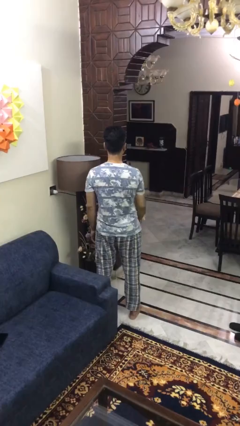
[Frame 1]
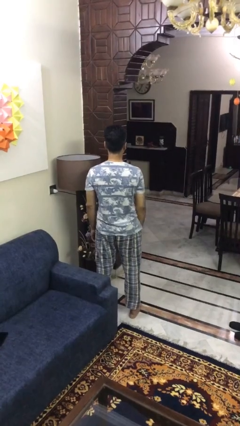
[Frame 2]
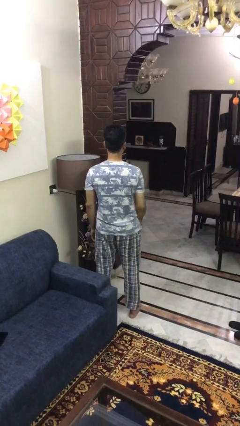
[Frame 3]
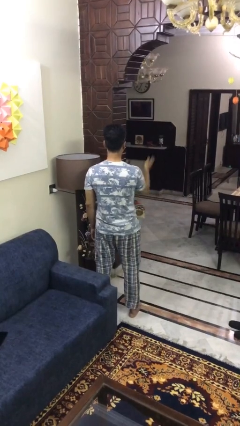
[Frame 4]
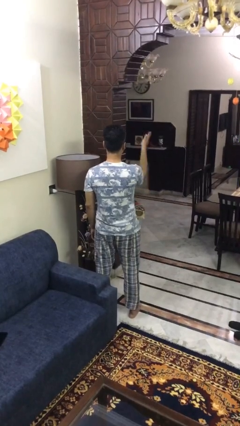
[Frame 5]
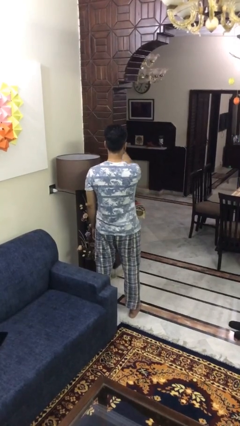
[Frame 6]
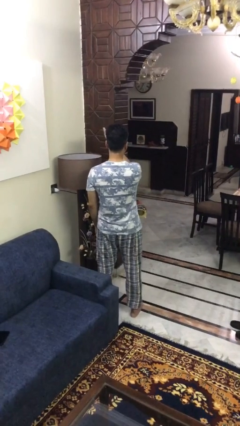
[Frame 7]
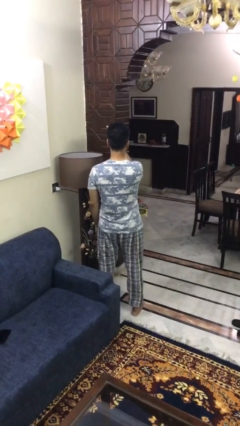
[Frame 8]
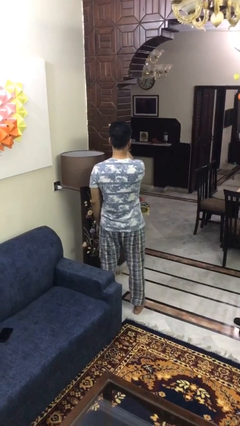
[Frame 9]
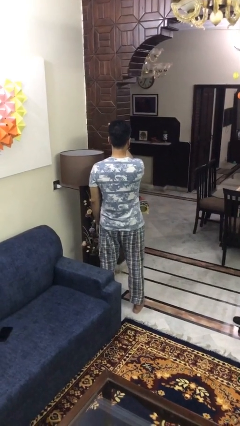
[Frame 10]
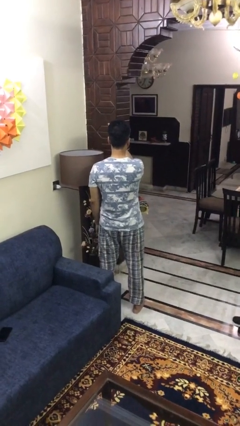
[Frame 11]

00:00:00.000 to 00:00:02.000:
person gestures swipe left

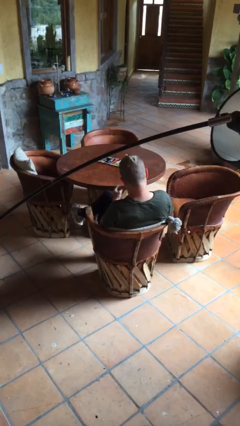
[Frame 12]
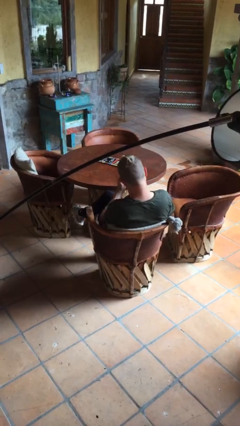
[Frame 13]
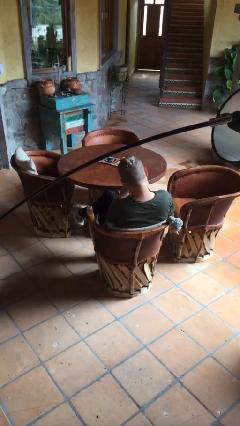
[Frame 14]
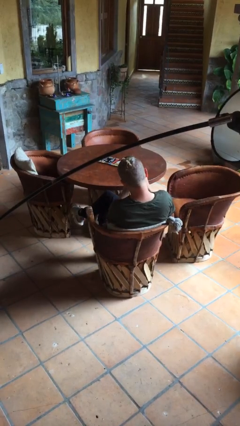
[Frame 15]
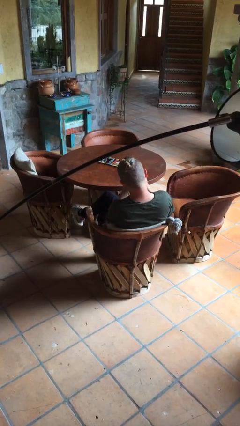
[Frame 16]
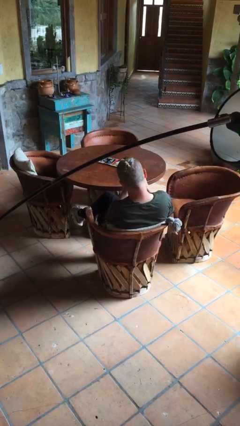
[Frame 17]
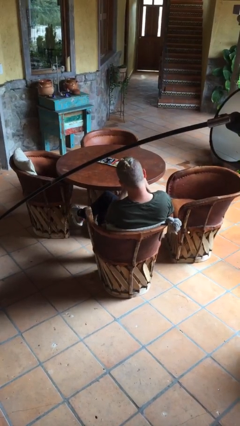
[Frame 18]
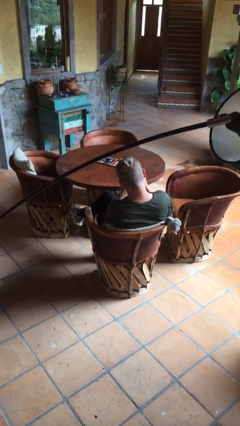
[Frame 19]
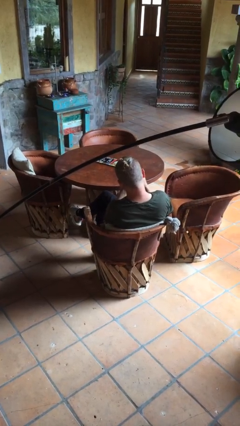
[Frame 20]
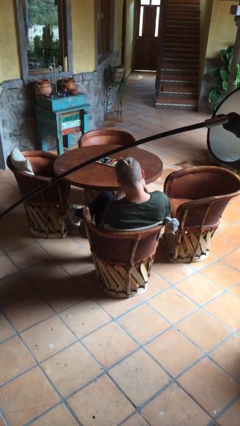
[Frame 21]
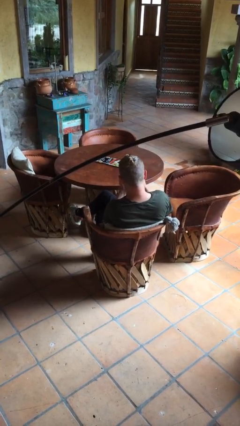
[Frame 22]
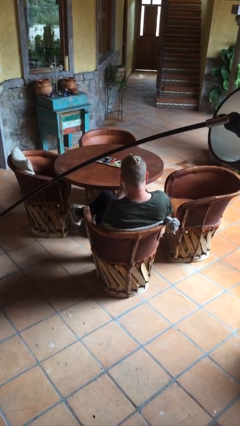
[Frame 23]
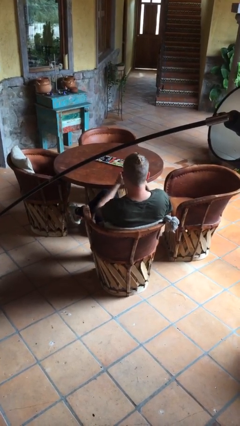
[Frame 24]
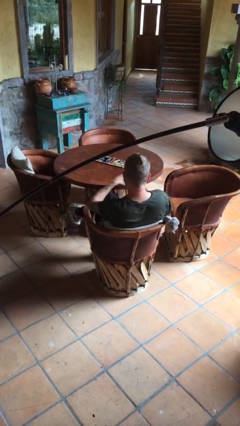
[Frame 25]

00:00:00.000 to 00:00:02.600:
person clips fingernails

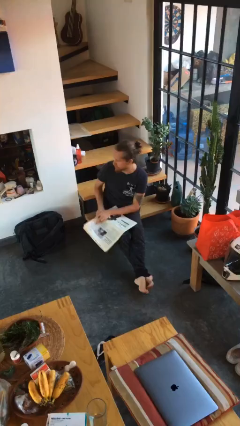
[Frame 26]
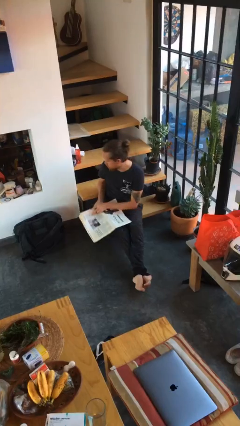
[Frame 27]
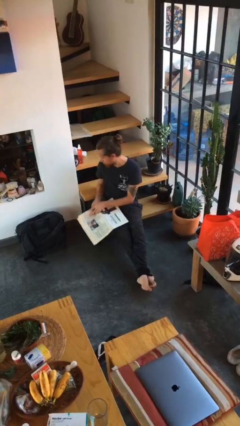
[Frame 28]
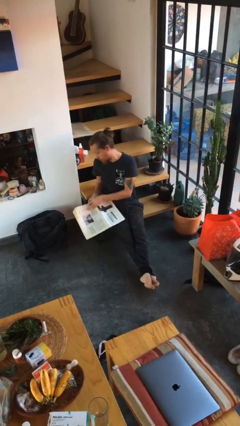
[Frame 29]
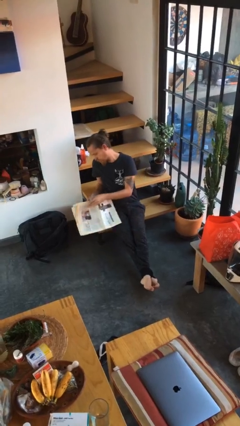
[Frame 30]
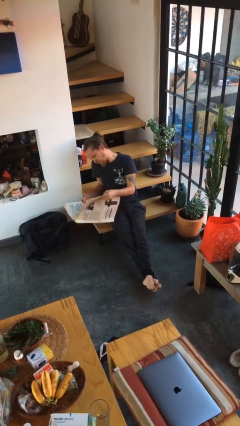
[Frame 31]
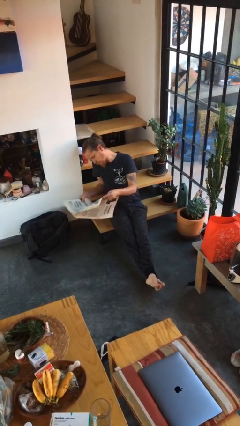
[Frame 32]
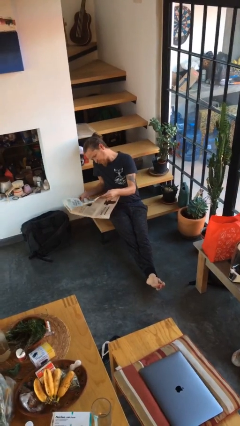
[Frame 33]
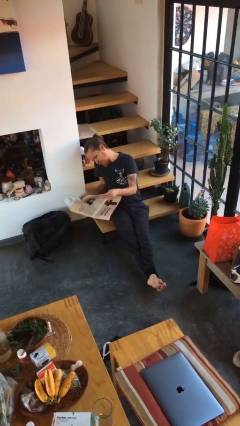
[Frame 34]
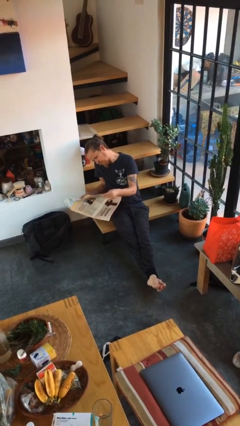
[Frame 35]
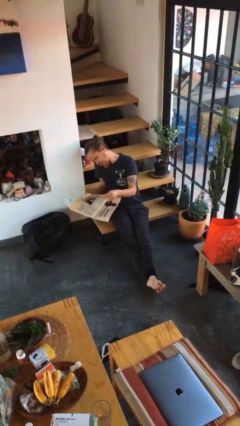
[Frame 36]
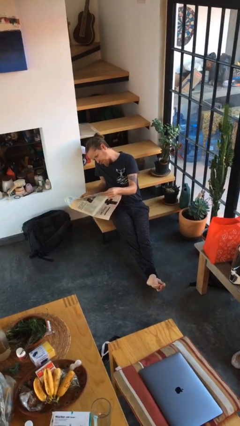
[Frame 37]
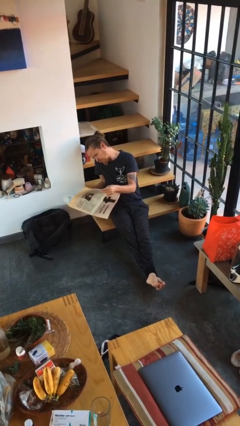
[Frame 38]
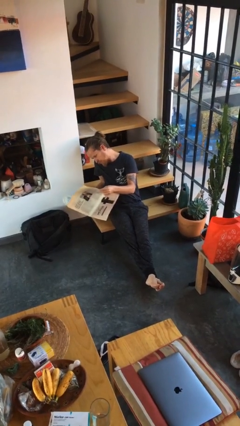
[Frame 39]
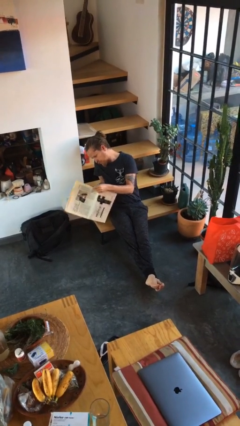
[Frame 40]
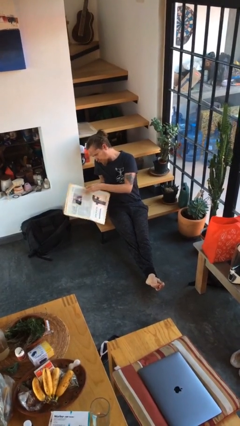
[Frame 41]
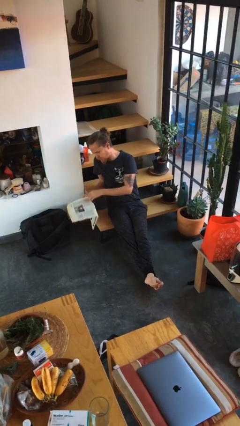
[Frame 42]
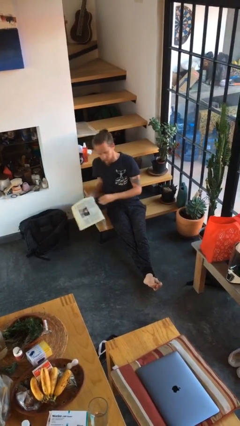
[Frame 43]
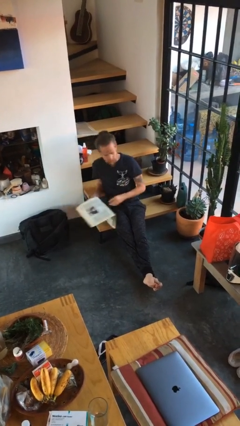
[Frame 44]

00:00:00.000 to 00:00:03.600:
person reads newspaper

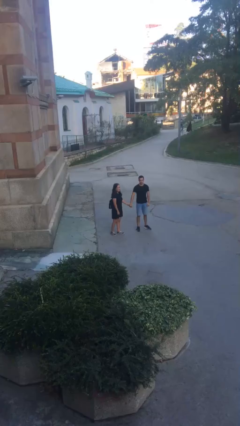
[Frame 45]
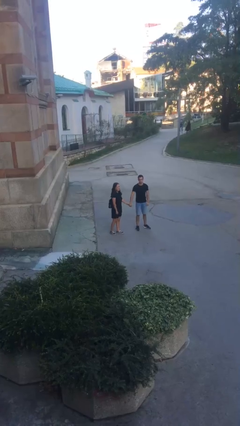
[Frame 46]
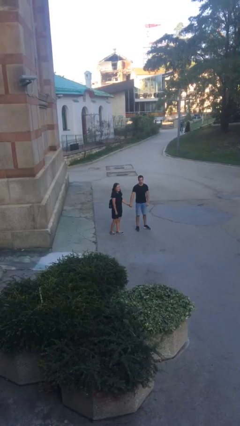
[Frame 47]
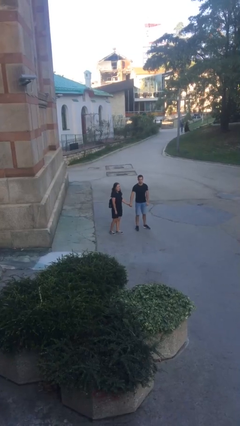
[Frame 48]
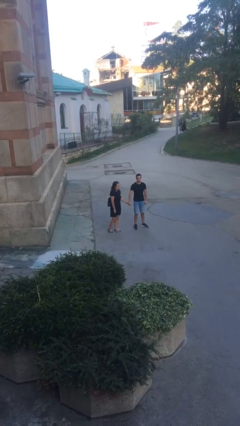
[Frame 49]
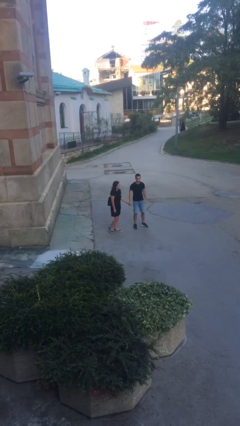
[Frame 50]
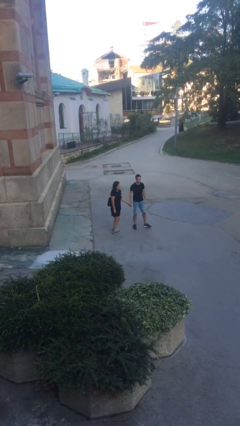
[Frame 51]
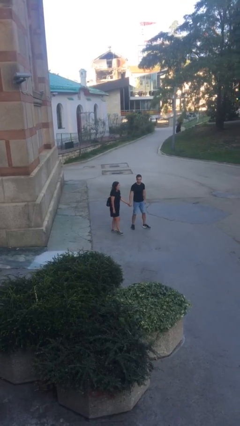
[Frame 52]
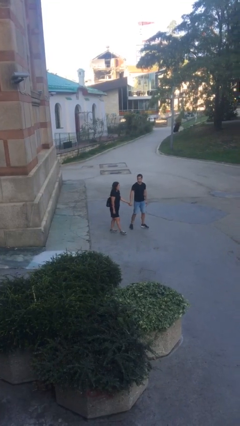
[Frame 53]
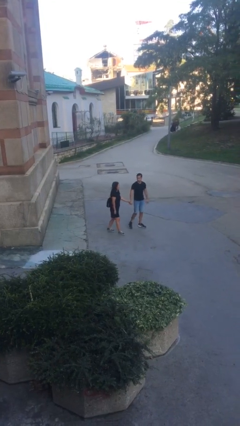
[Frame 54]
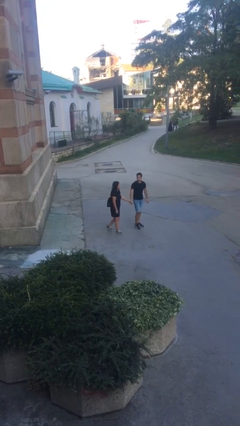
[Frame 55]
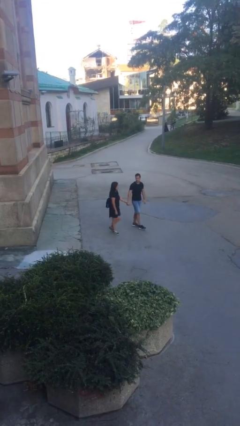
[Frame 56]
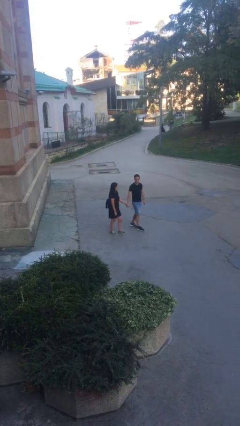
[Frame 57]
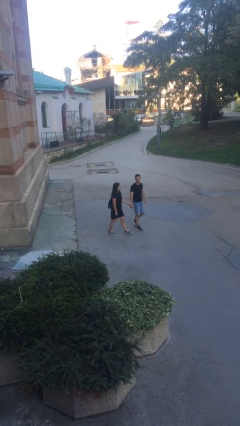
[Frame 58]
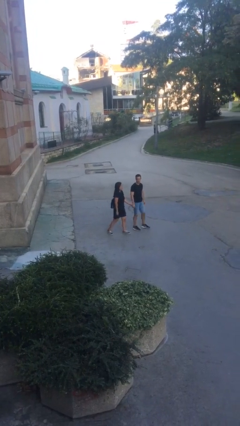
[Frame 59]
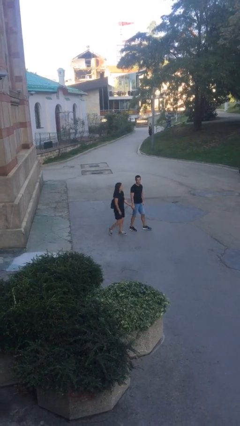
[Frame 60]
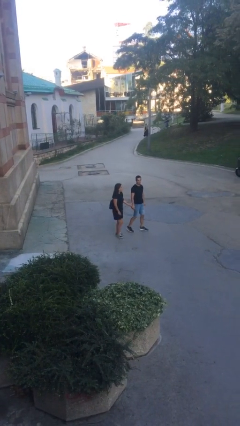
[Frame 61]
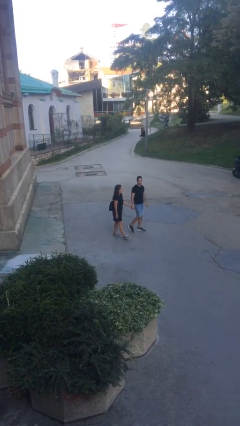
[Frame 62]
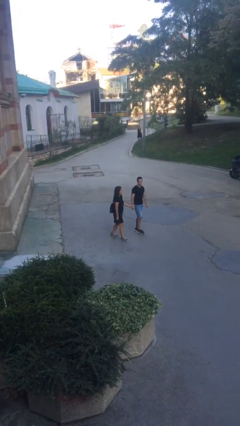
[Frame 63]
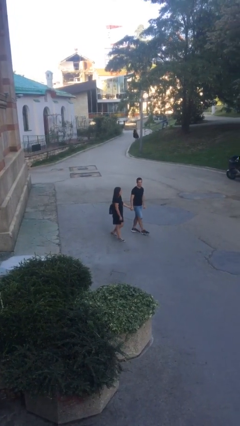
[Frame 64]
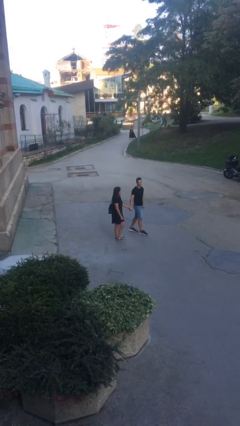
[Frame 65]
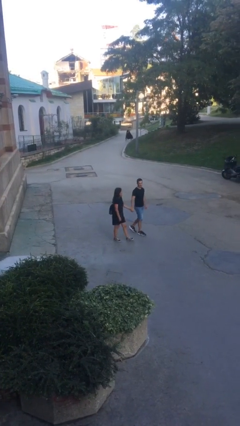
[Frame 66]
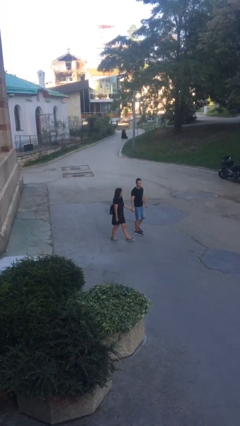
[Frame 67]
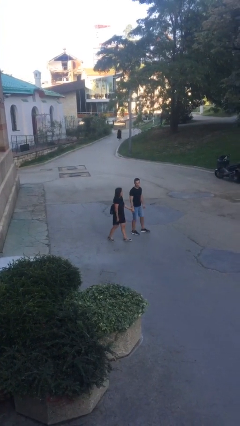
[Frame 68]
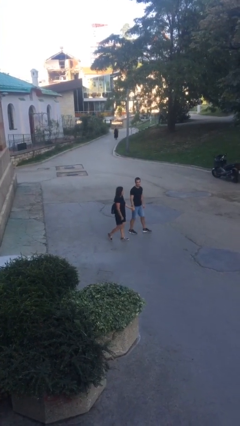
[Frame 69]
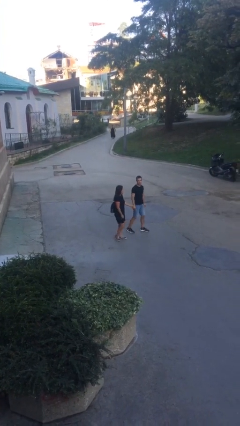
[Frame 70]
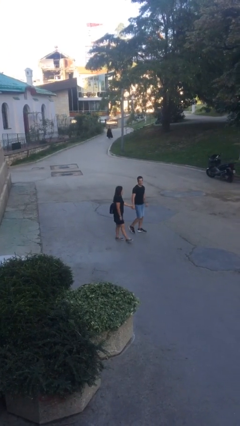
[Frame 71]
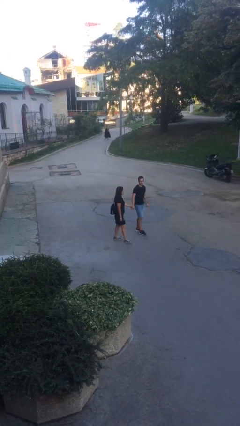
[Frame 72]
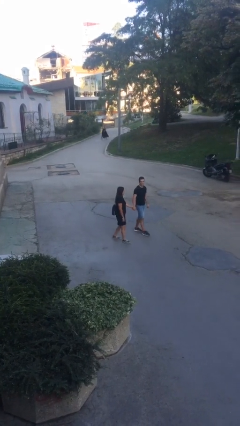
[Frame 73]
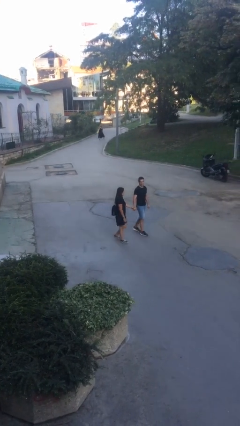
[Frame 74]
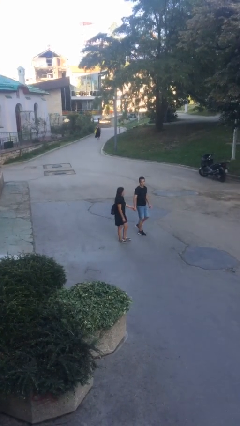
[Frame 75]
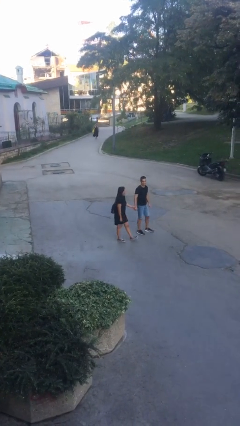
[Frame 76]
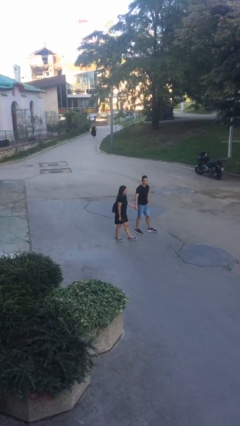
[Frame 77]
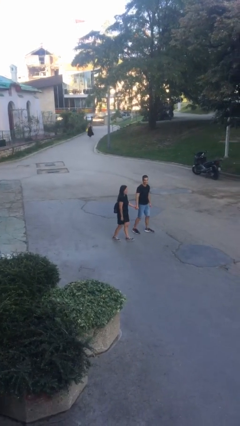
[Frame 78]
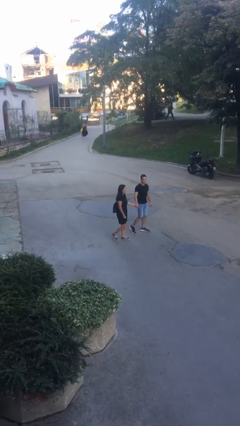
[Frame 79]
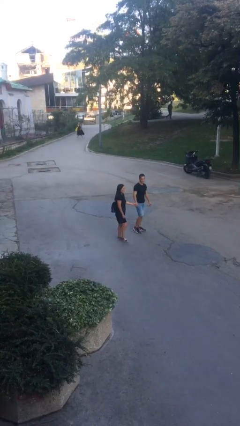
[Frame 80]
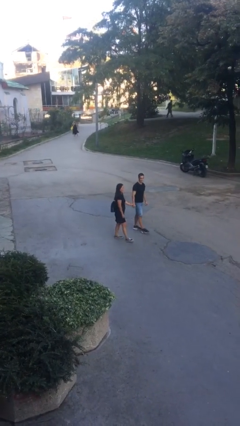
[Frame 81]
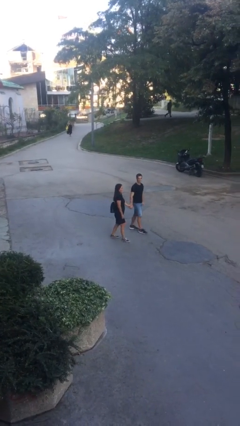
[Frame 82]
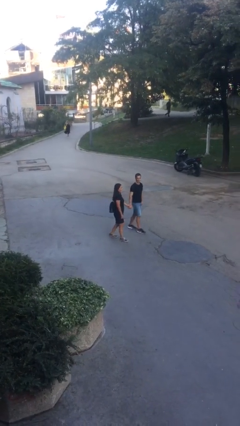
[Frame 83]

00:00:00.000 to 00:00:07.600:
person holds hand

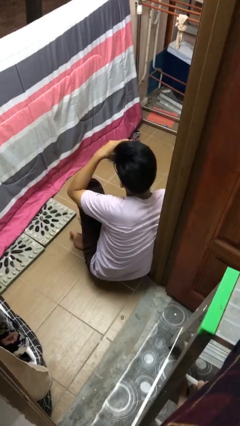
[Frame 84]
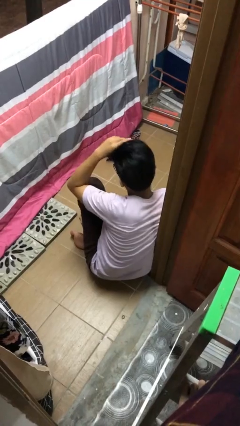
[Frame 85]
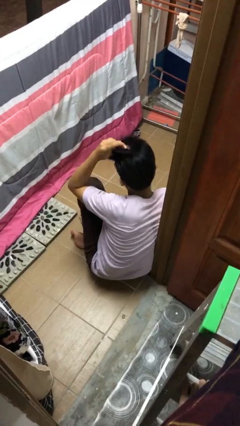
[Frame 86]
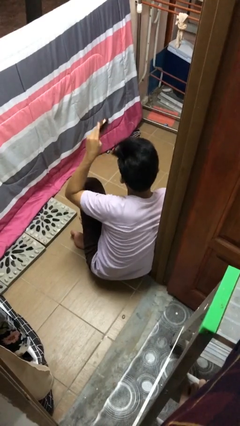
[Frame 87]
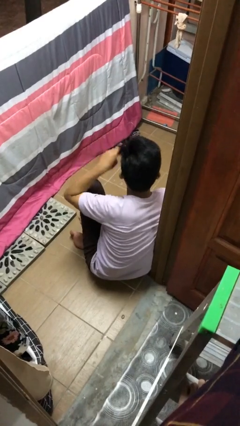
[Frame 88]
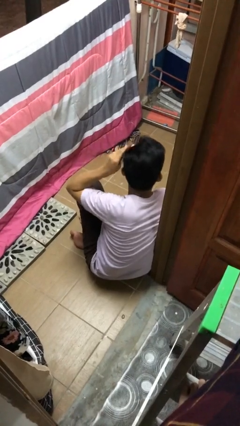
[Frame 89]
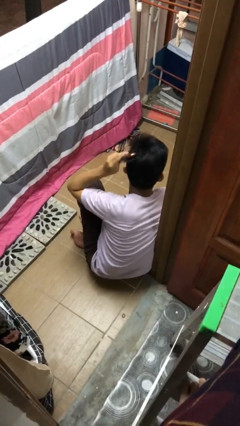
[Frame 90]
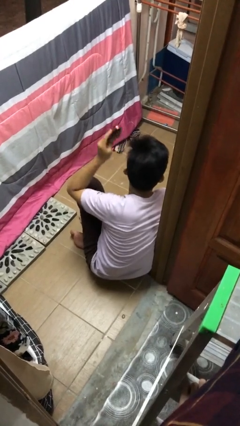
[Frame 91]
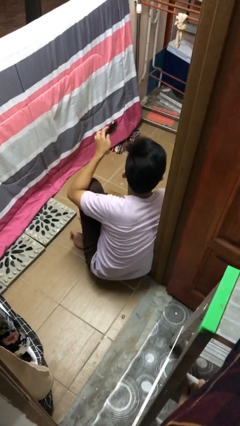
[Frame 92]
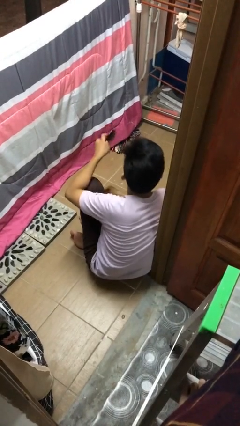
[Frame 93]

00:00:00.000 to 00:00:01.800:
person brushes hair

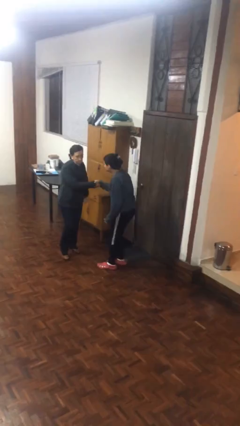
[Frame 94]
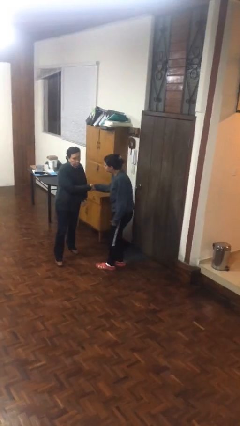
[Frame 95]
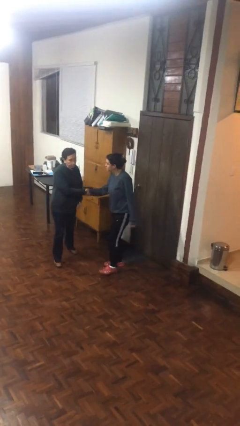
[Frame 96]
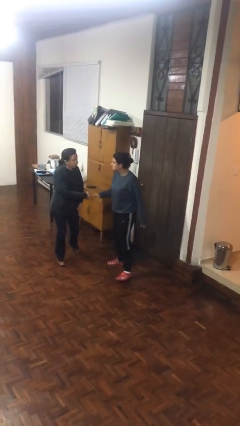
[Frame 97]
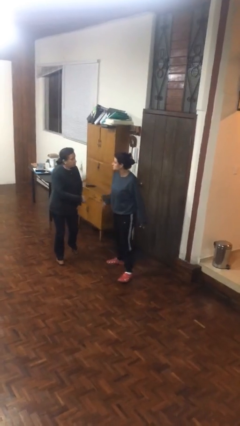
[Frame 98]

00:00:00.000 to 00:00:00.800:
person shakes hand
